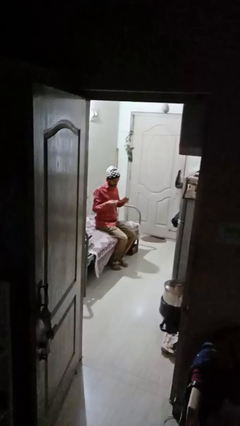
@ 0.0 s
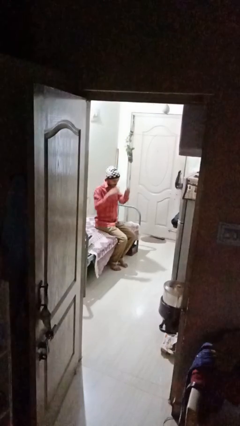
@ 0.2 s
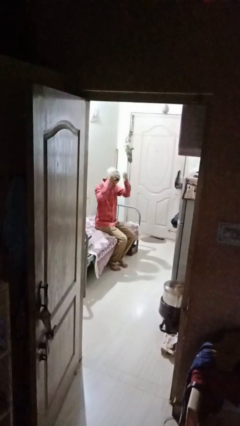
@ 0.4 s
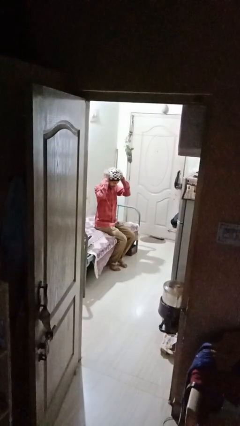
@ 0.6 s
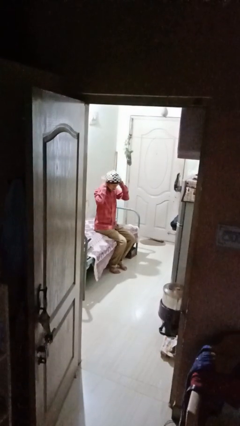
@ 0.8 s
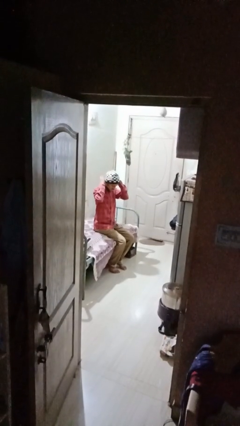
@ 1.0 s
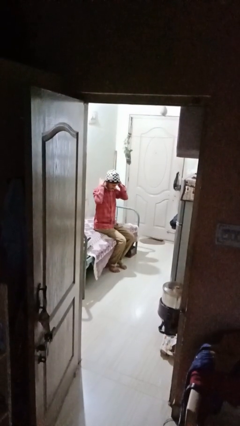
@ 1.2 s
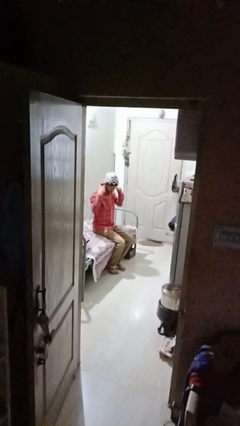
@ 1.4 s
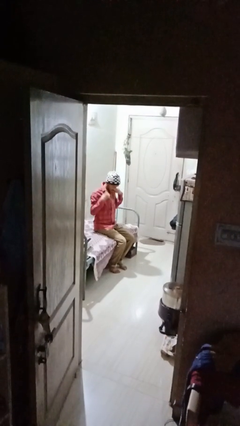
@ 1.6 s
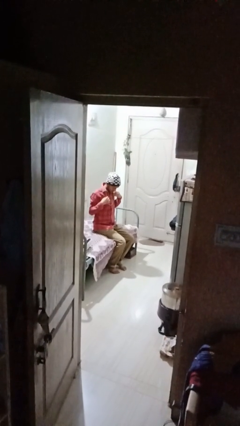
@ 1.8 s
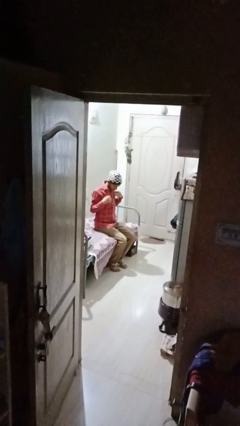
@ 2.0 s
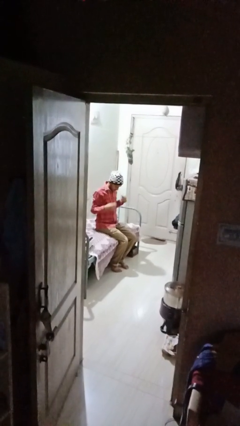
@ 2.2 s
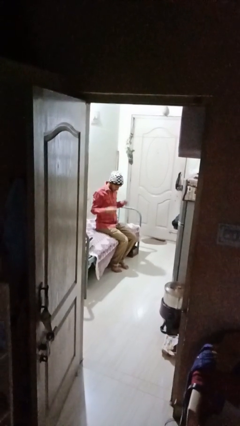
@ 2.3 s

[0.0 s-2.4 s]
person puts on necklace

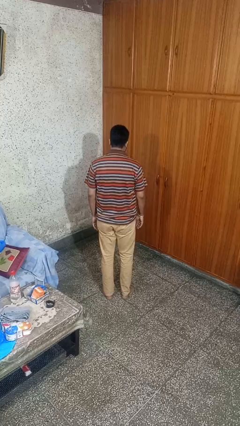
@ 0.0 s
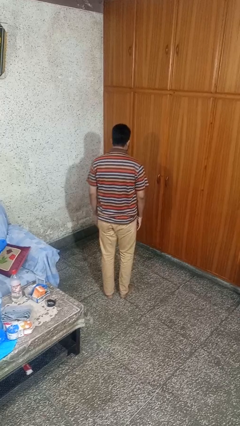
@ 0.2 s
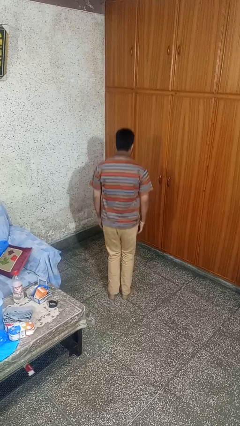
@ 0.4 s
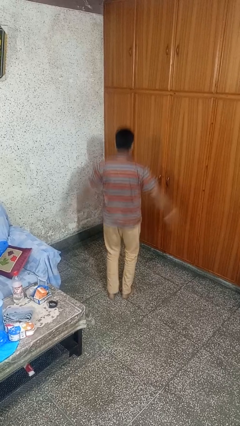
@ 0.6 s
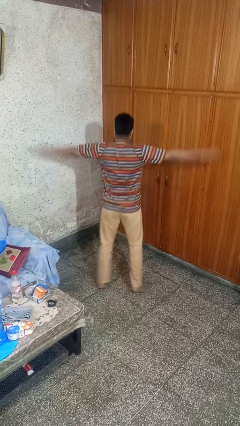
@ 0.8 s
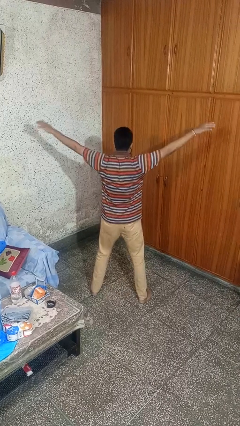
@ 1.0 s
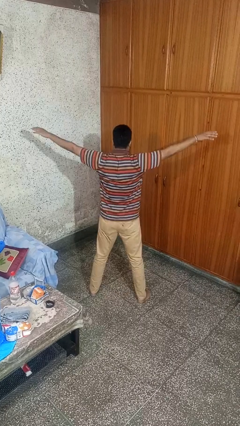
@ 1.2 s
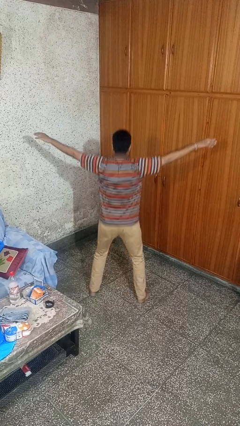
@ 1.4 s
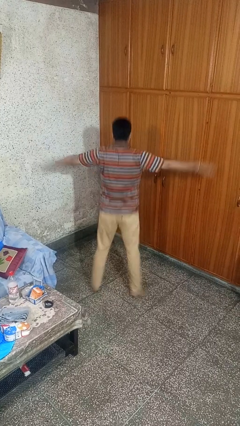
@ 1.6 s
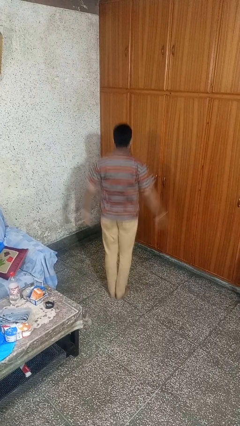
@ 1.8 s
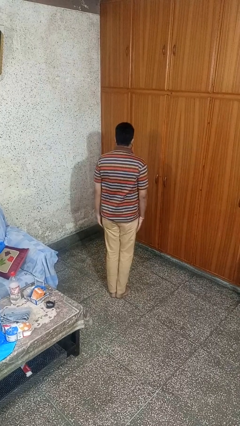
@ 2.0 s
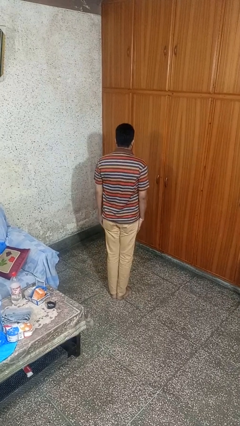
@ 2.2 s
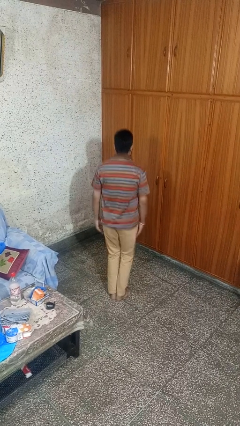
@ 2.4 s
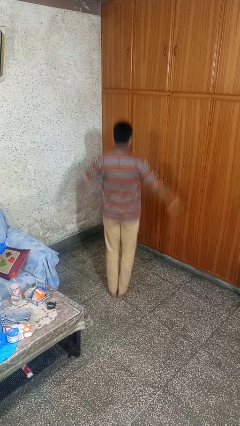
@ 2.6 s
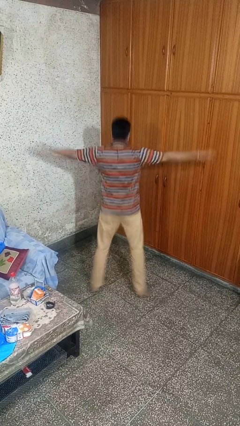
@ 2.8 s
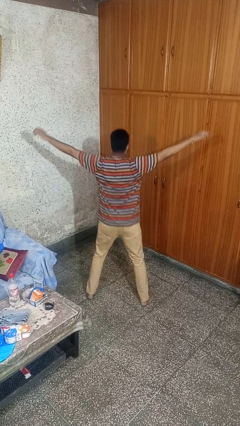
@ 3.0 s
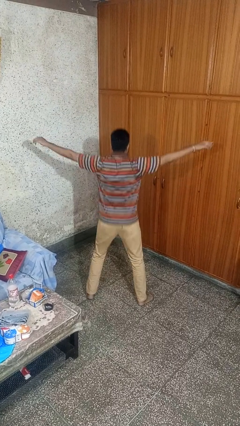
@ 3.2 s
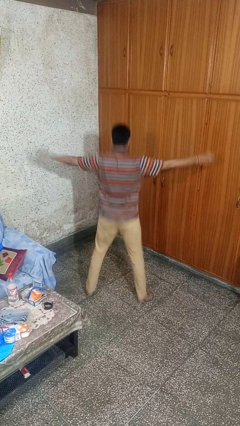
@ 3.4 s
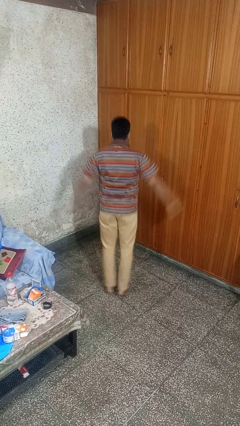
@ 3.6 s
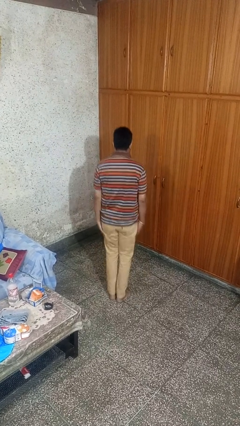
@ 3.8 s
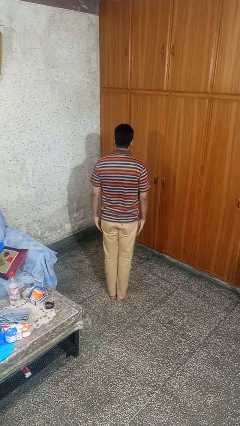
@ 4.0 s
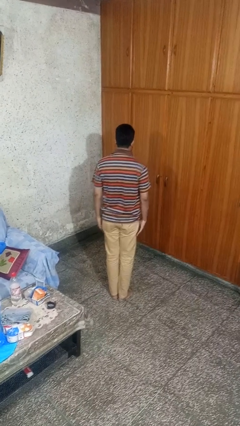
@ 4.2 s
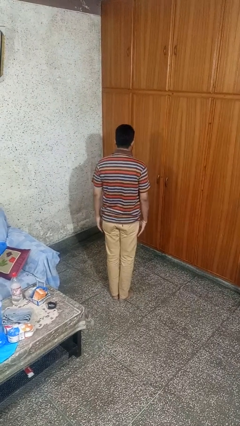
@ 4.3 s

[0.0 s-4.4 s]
person exercises with jumping jacks

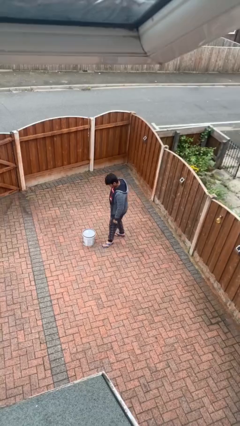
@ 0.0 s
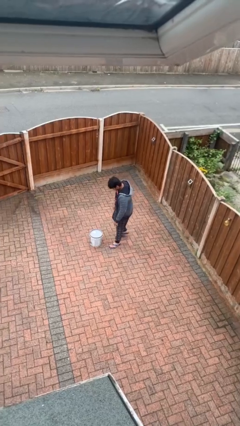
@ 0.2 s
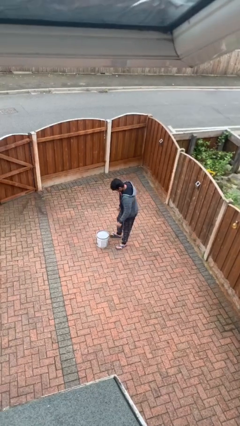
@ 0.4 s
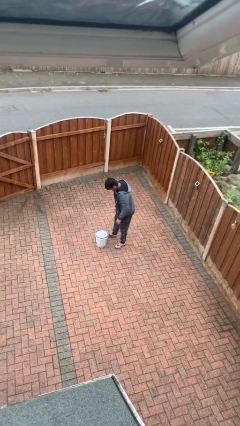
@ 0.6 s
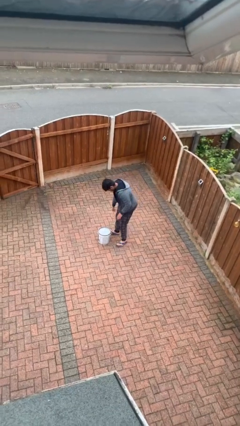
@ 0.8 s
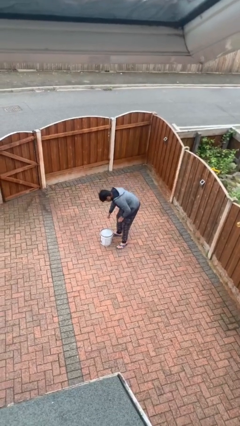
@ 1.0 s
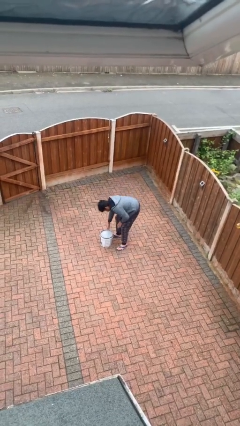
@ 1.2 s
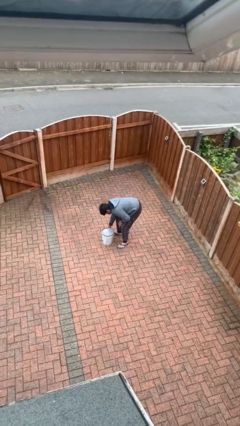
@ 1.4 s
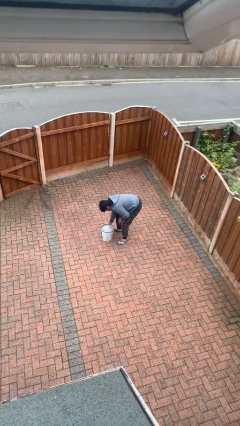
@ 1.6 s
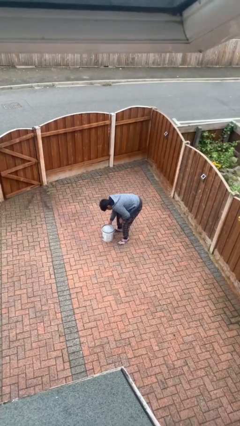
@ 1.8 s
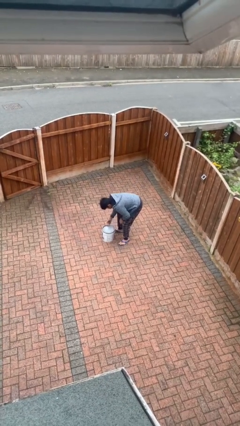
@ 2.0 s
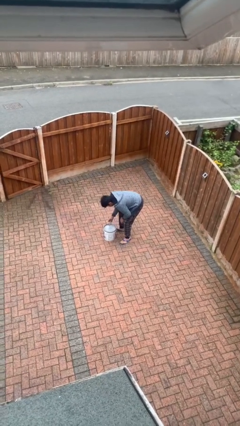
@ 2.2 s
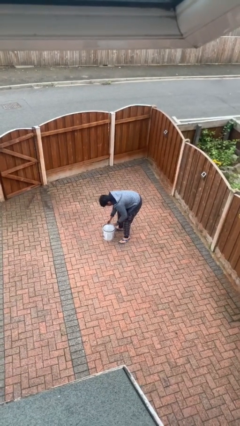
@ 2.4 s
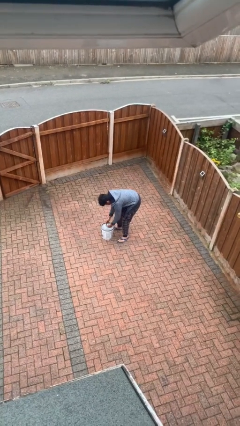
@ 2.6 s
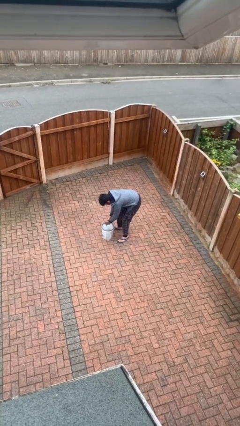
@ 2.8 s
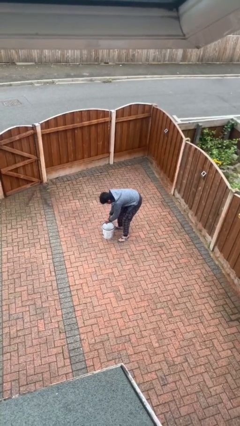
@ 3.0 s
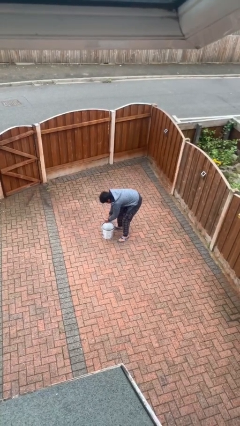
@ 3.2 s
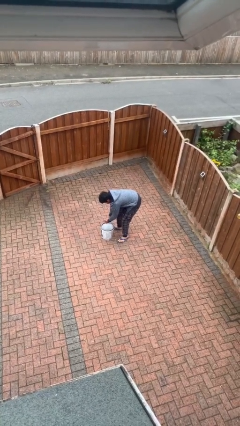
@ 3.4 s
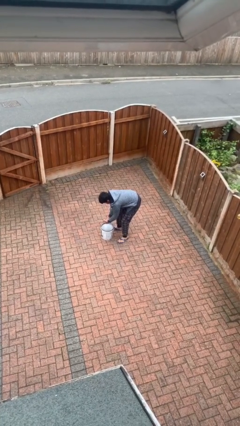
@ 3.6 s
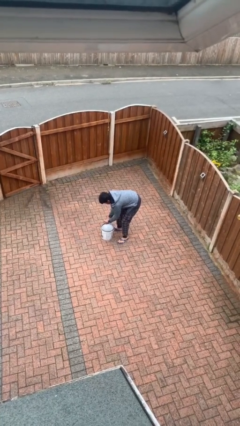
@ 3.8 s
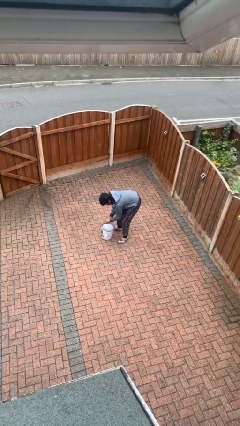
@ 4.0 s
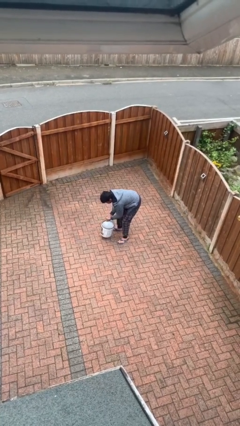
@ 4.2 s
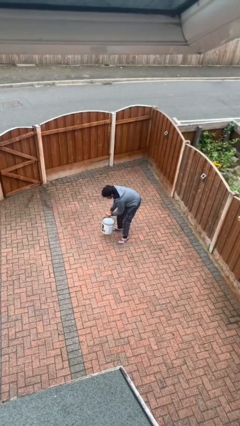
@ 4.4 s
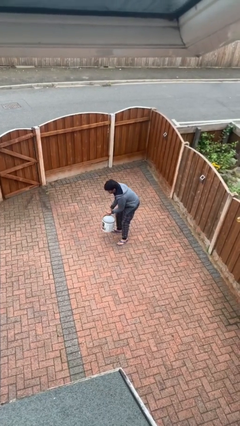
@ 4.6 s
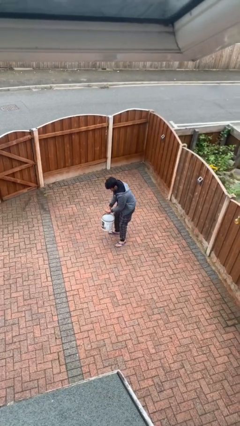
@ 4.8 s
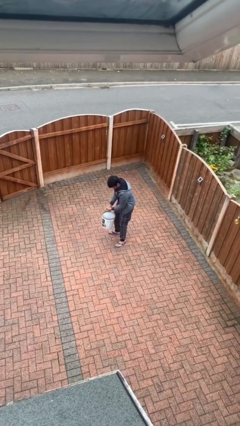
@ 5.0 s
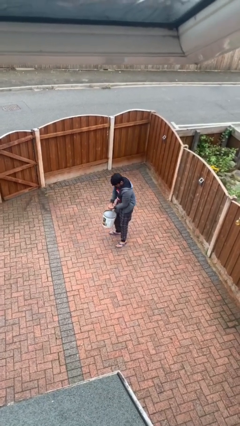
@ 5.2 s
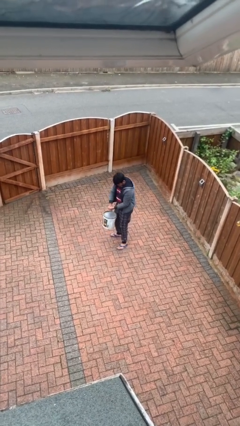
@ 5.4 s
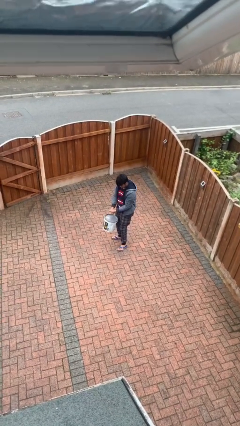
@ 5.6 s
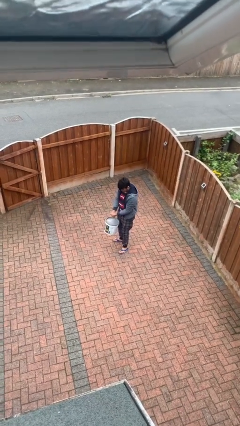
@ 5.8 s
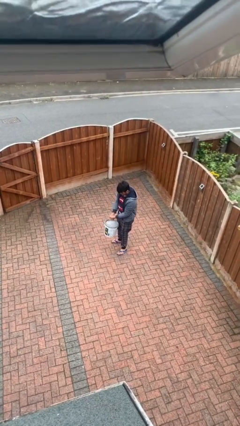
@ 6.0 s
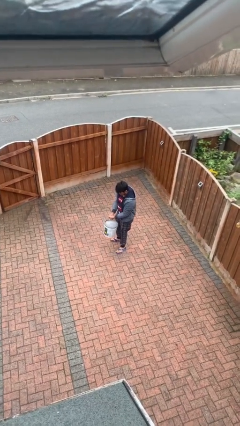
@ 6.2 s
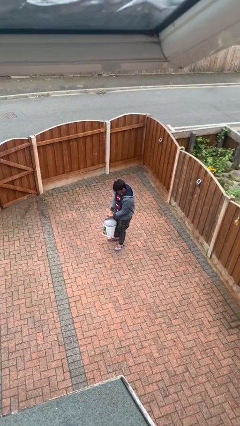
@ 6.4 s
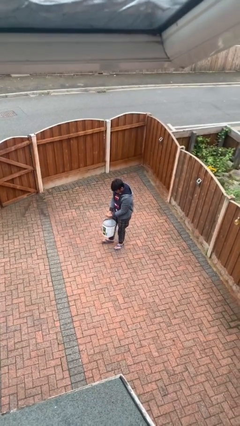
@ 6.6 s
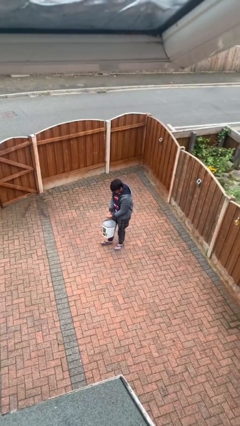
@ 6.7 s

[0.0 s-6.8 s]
person picks up object from floor

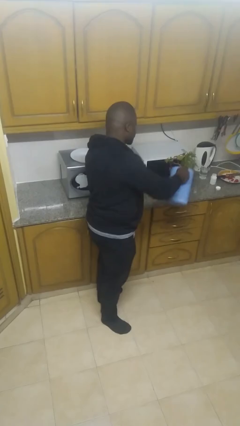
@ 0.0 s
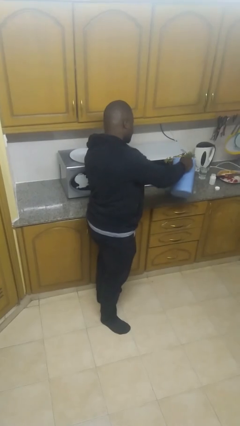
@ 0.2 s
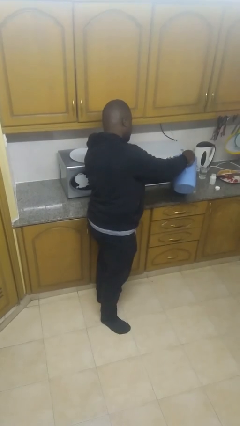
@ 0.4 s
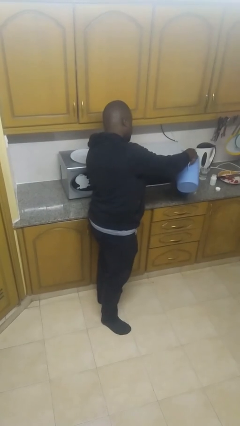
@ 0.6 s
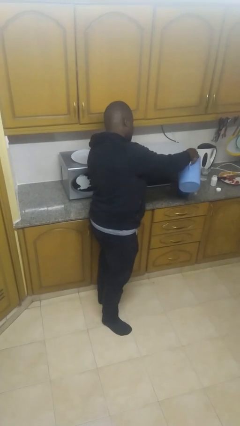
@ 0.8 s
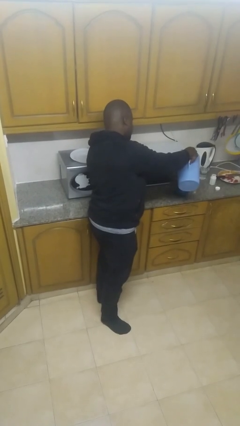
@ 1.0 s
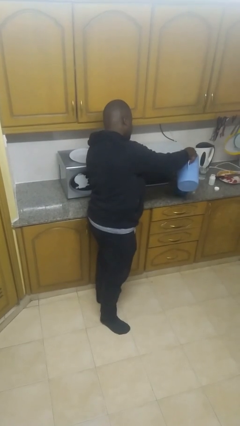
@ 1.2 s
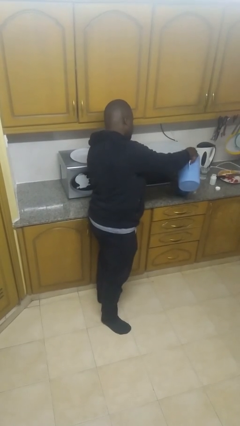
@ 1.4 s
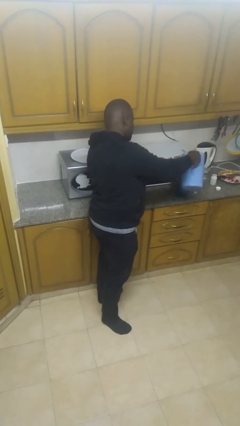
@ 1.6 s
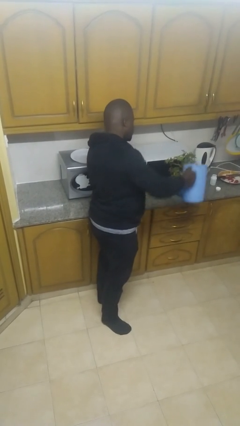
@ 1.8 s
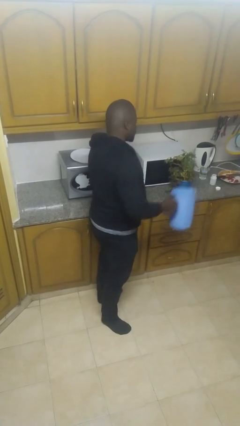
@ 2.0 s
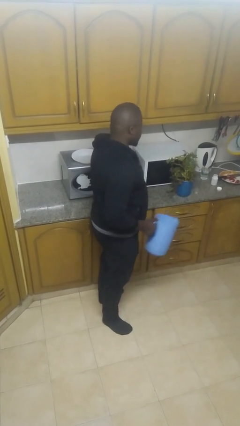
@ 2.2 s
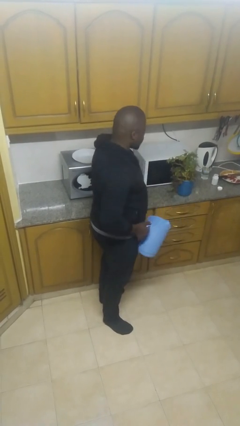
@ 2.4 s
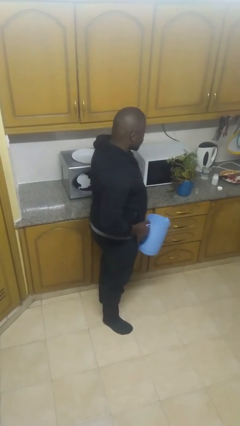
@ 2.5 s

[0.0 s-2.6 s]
person waters houseplant

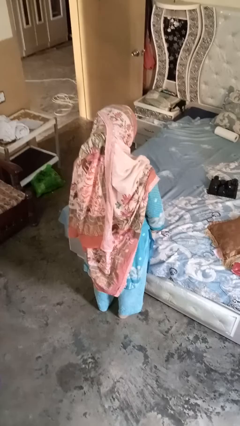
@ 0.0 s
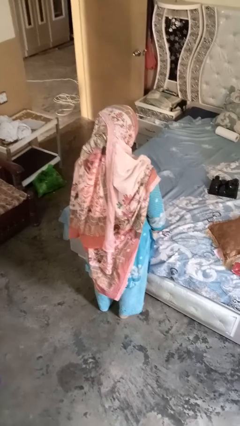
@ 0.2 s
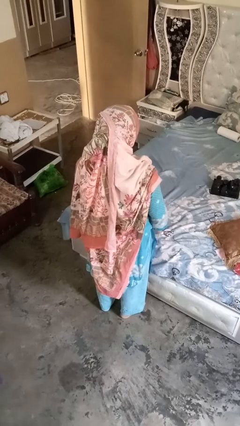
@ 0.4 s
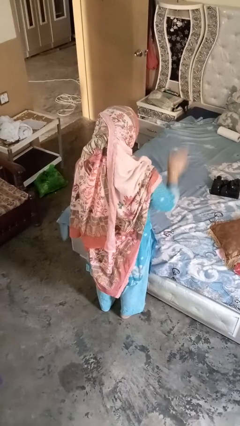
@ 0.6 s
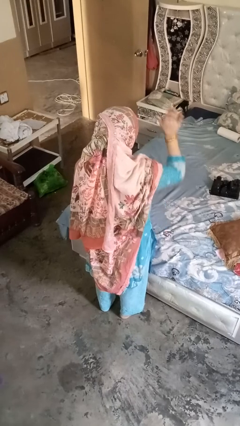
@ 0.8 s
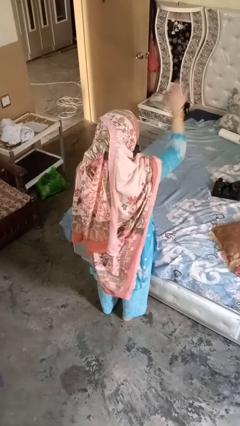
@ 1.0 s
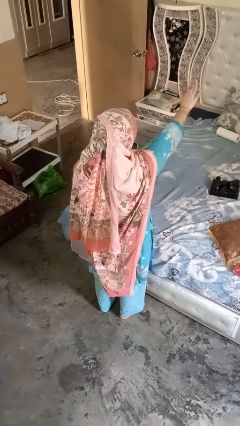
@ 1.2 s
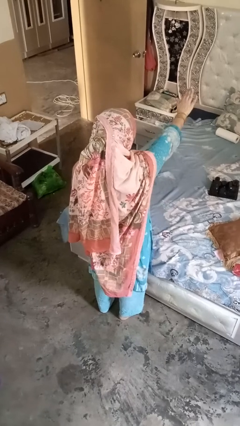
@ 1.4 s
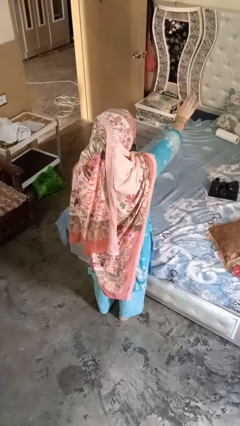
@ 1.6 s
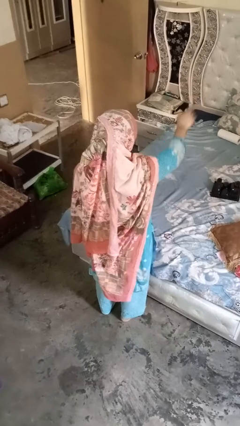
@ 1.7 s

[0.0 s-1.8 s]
person gestures stop
